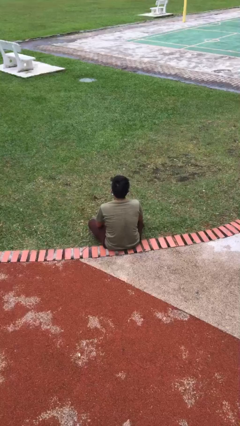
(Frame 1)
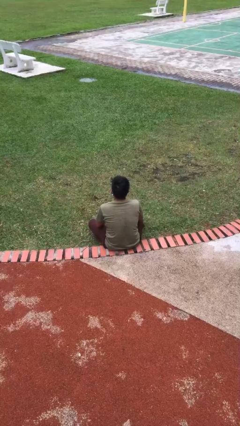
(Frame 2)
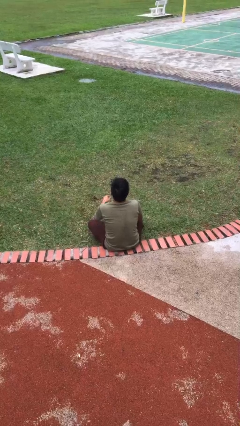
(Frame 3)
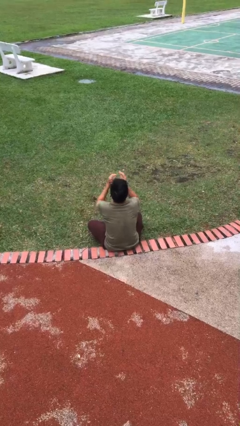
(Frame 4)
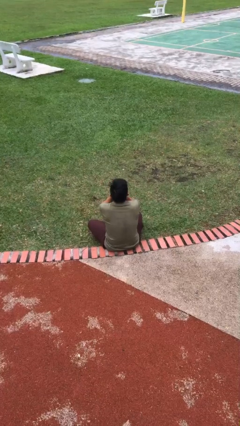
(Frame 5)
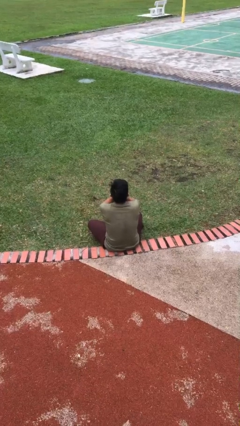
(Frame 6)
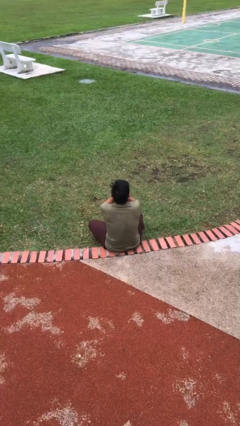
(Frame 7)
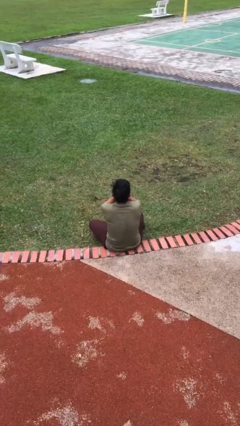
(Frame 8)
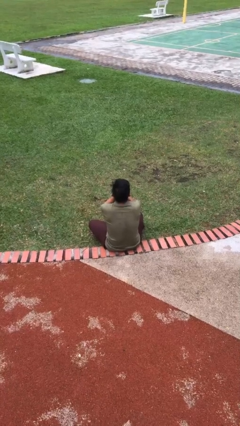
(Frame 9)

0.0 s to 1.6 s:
person sneezes into hand

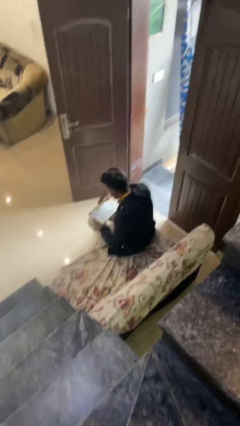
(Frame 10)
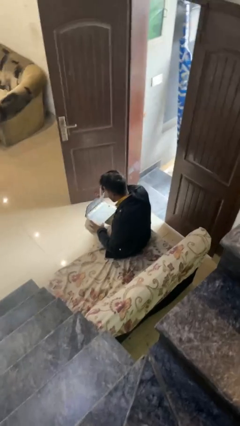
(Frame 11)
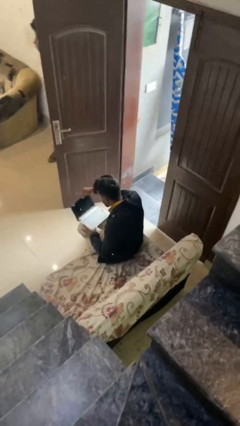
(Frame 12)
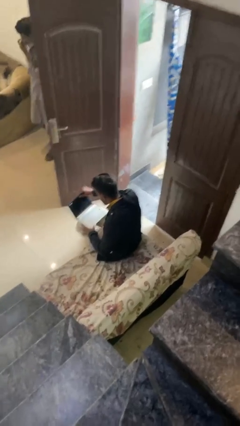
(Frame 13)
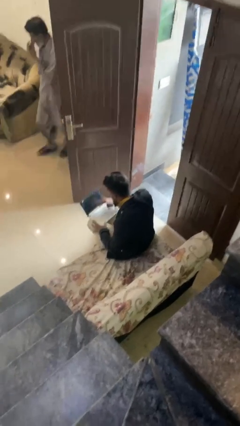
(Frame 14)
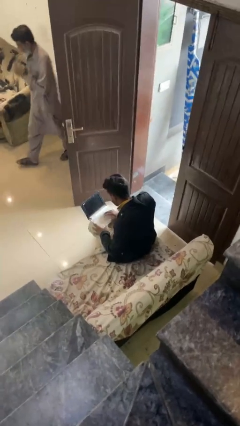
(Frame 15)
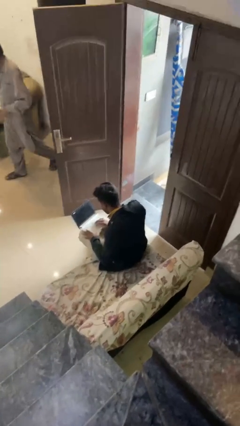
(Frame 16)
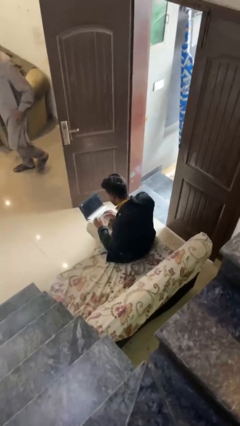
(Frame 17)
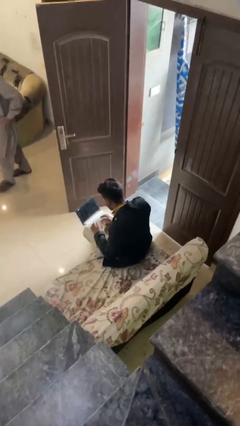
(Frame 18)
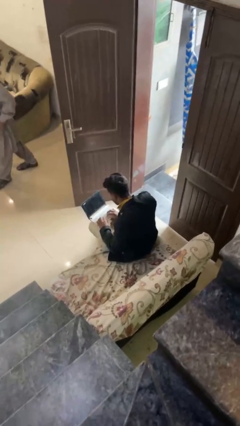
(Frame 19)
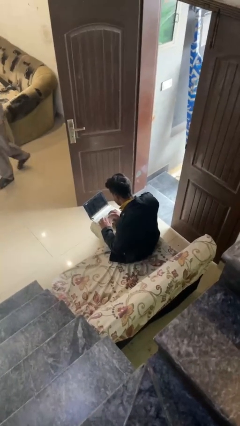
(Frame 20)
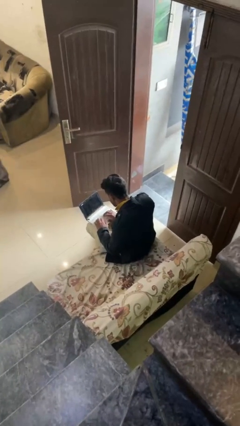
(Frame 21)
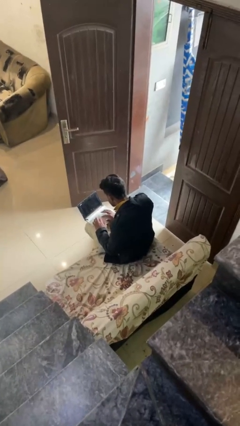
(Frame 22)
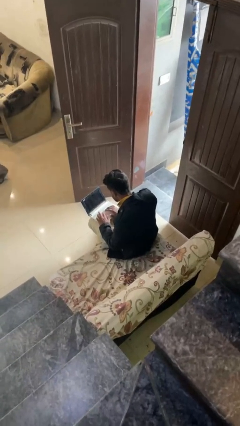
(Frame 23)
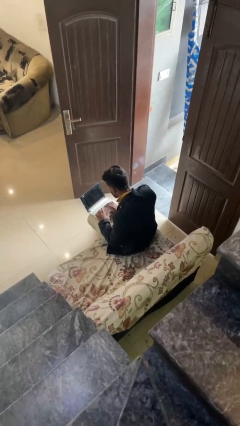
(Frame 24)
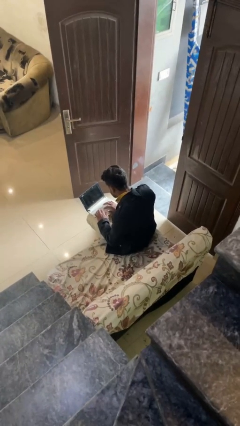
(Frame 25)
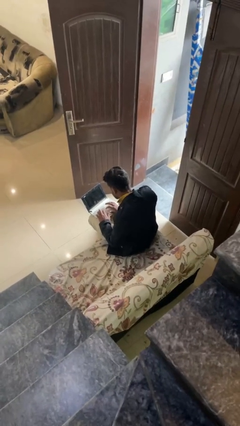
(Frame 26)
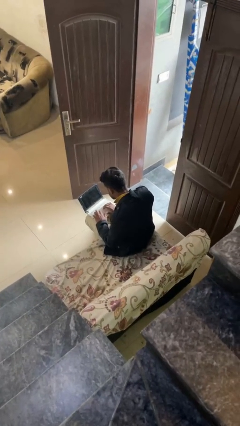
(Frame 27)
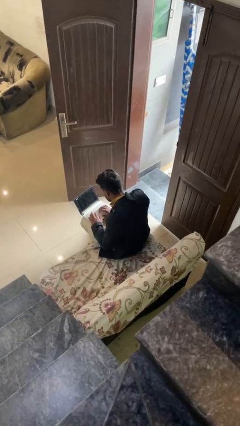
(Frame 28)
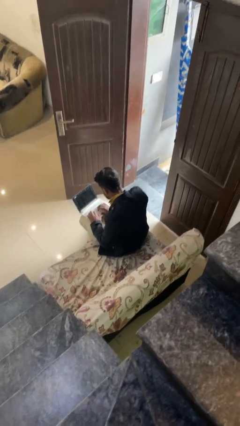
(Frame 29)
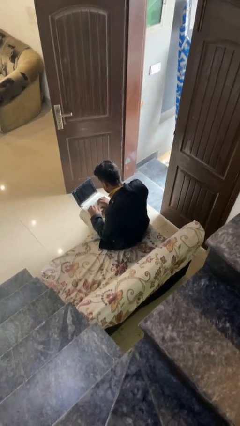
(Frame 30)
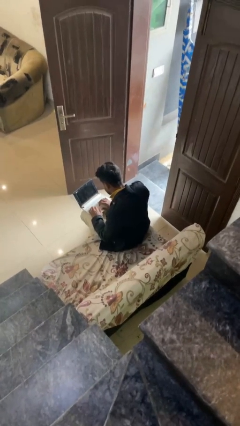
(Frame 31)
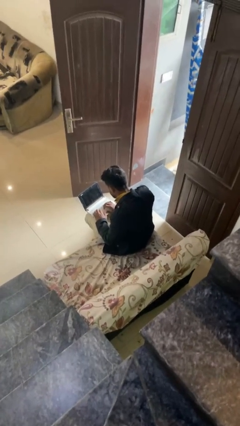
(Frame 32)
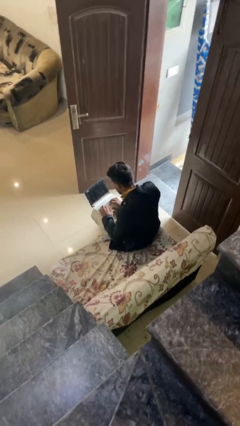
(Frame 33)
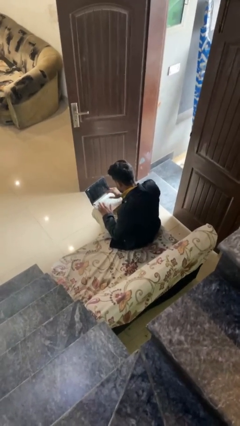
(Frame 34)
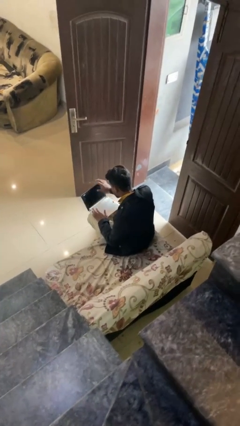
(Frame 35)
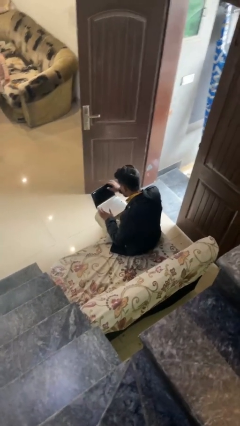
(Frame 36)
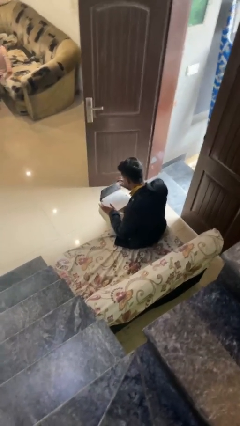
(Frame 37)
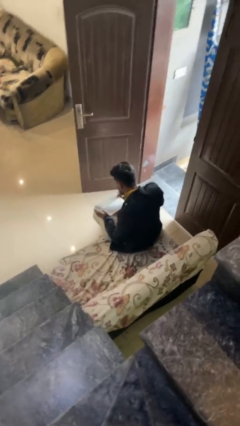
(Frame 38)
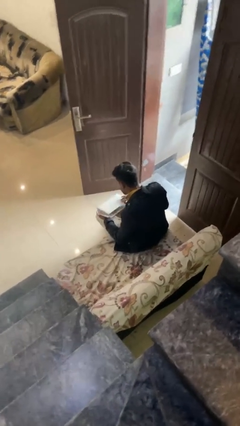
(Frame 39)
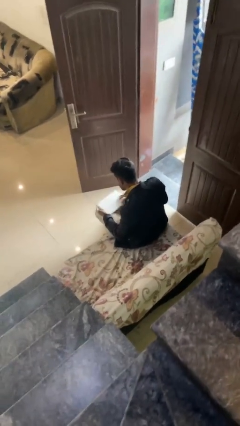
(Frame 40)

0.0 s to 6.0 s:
person interacts with laptop

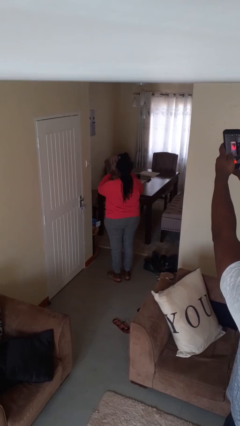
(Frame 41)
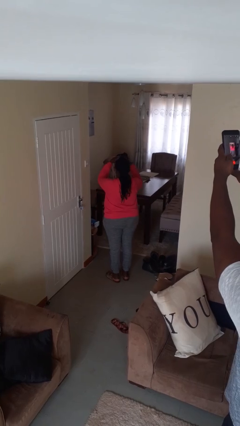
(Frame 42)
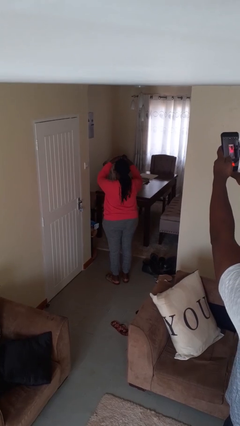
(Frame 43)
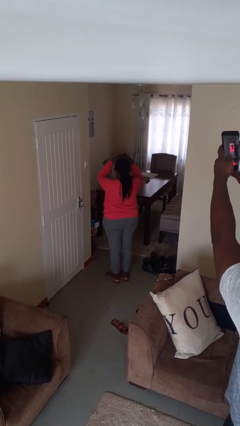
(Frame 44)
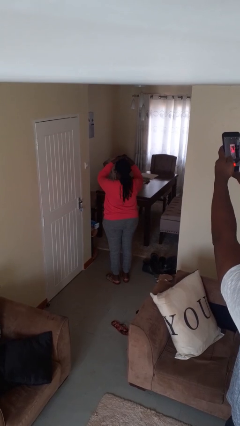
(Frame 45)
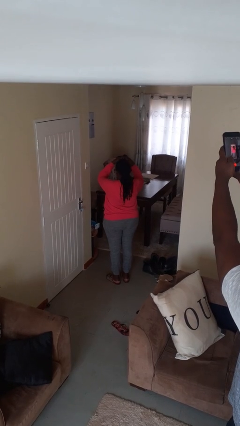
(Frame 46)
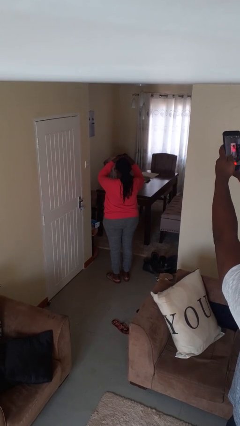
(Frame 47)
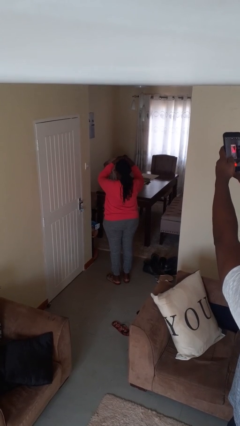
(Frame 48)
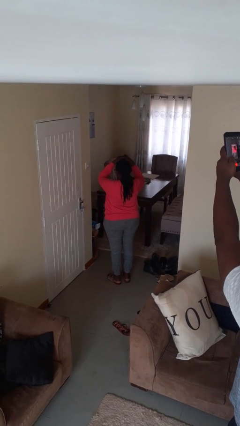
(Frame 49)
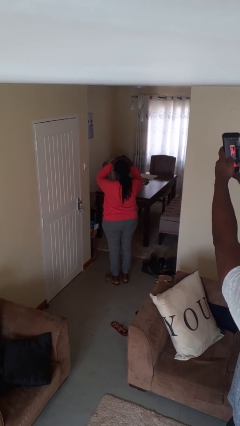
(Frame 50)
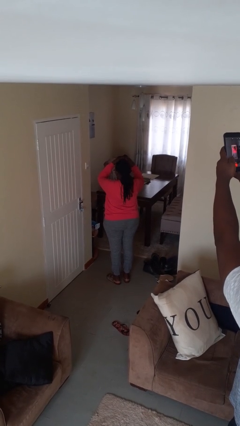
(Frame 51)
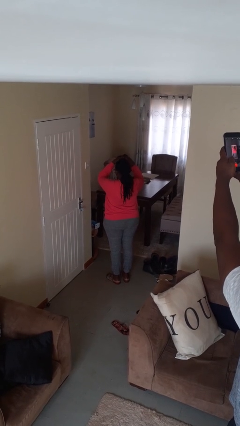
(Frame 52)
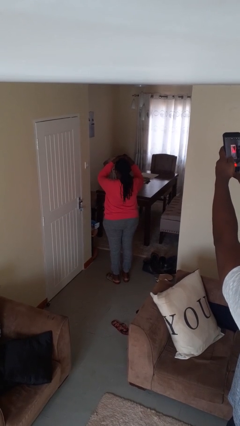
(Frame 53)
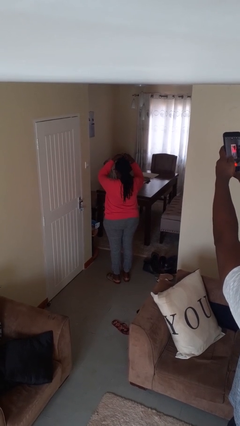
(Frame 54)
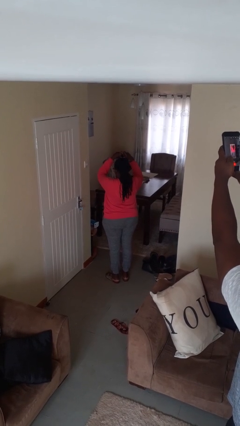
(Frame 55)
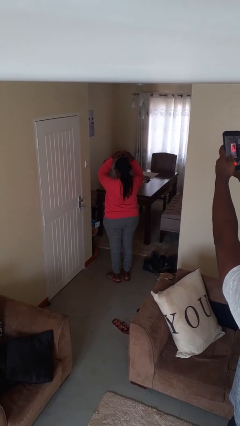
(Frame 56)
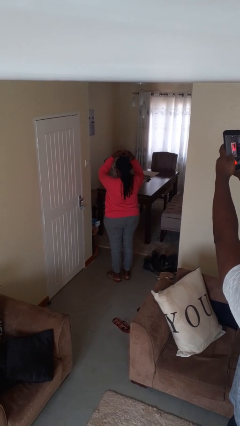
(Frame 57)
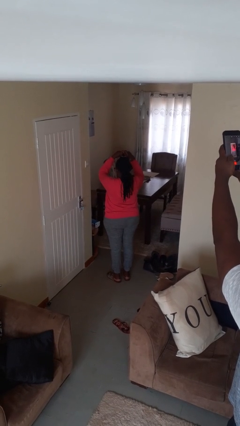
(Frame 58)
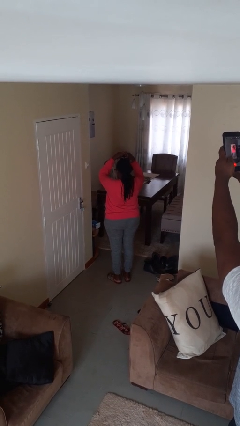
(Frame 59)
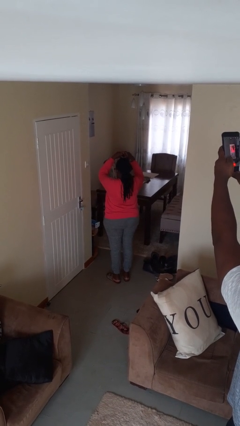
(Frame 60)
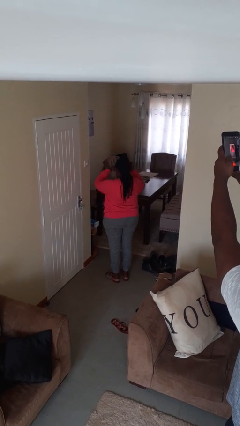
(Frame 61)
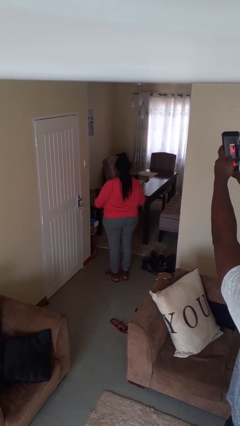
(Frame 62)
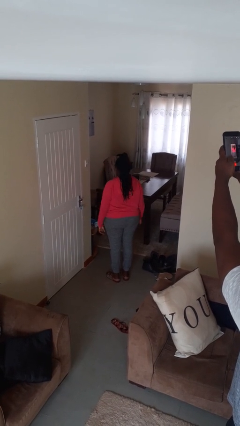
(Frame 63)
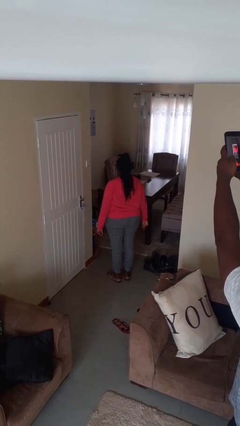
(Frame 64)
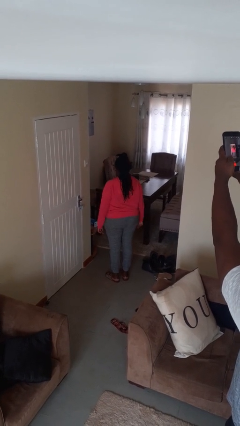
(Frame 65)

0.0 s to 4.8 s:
person gestures heart

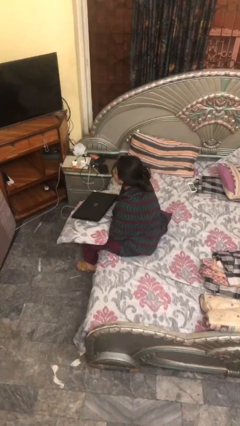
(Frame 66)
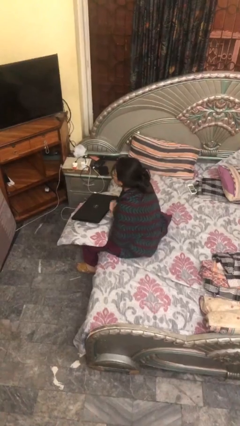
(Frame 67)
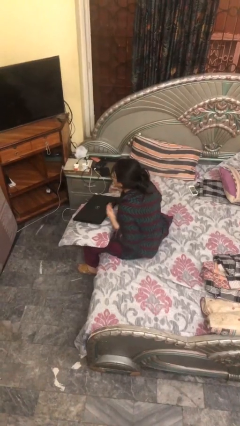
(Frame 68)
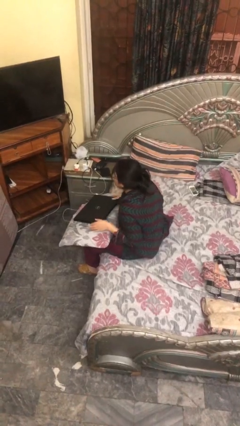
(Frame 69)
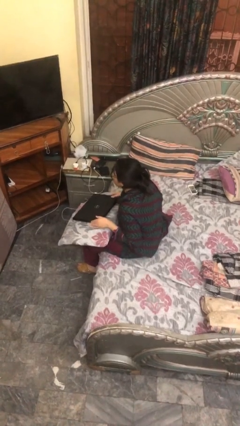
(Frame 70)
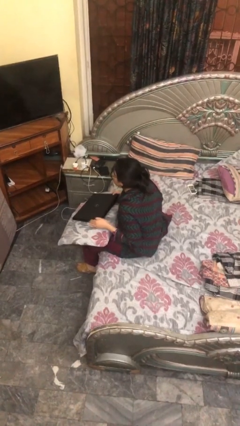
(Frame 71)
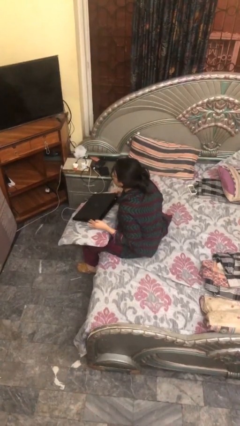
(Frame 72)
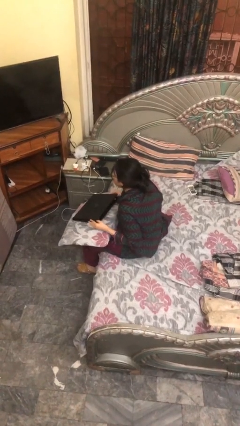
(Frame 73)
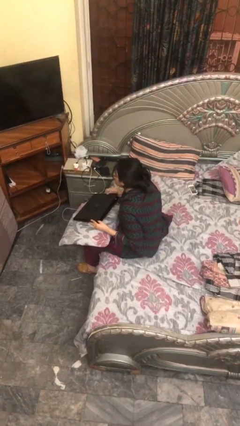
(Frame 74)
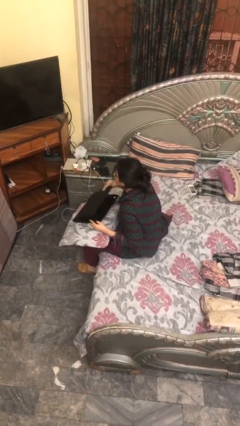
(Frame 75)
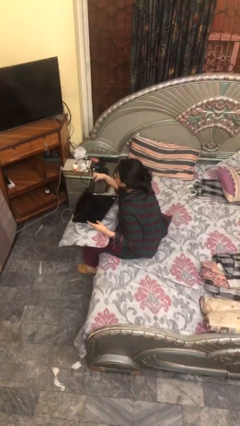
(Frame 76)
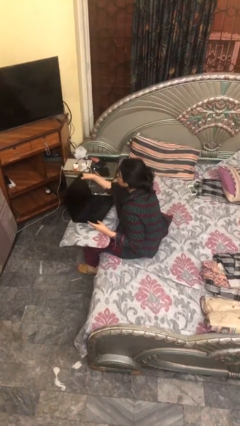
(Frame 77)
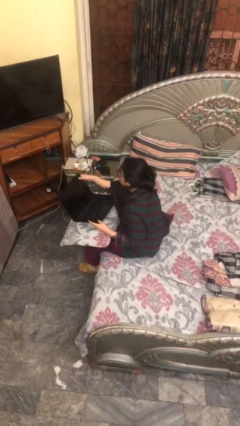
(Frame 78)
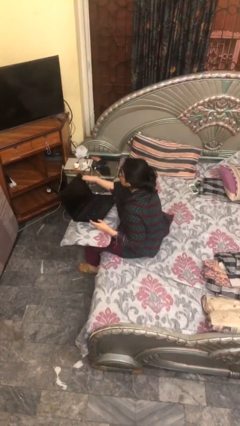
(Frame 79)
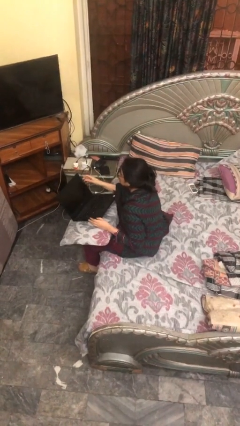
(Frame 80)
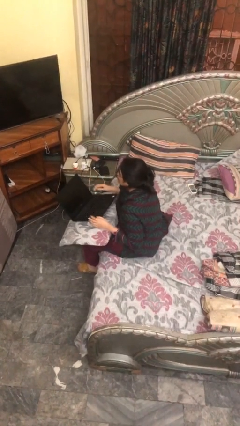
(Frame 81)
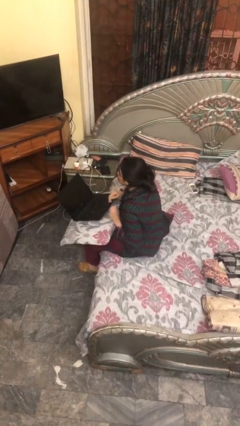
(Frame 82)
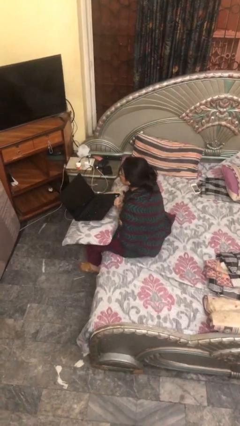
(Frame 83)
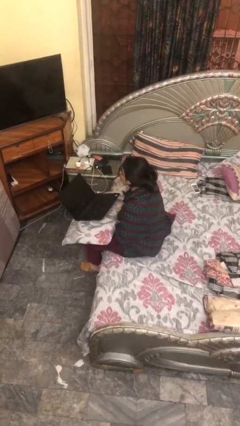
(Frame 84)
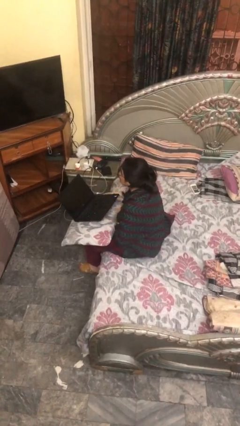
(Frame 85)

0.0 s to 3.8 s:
person opens laptop

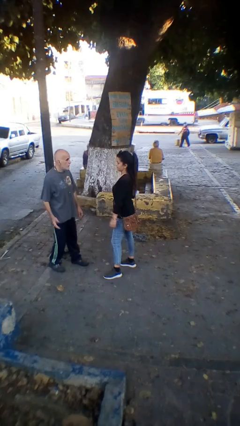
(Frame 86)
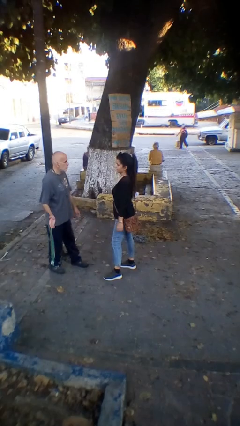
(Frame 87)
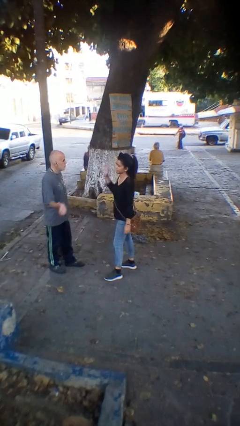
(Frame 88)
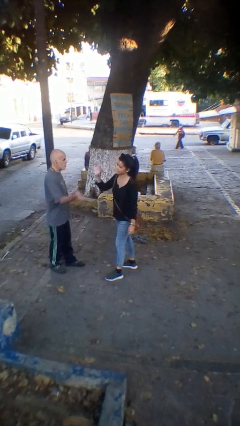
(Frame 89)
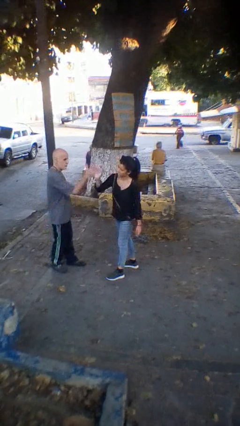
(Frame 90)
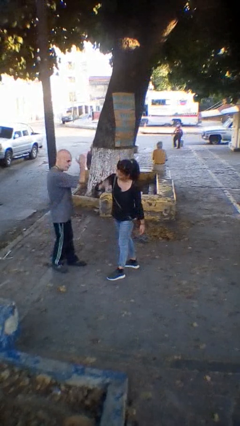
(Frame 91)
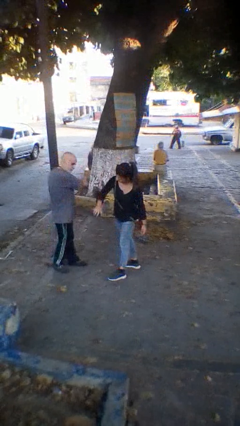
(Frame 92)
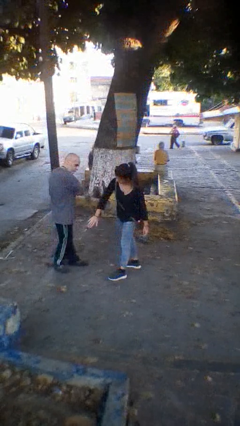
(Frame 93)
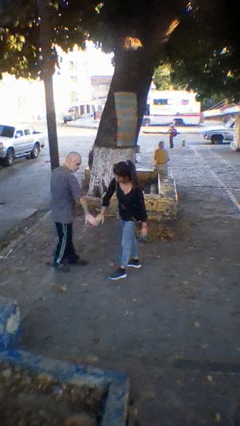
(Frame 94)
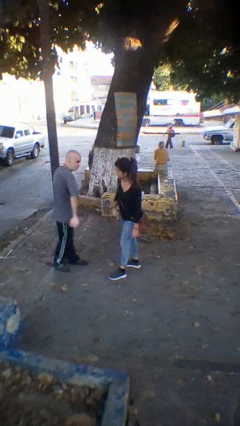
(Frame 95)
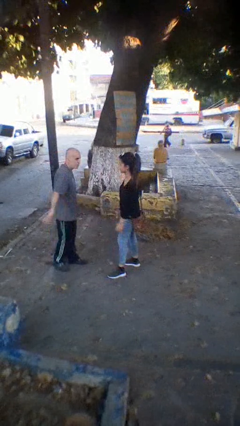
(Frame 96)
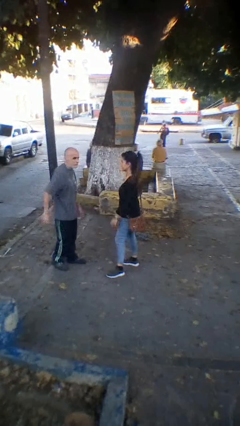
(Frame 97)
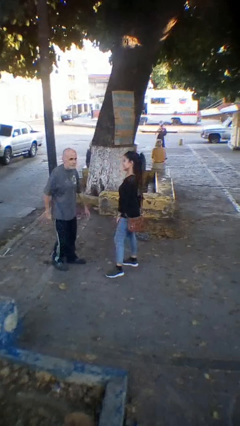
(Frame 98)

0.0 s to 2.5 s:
person highfives hand
